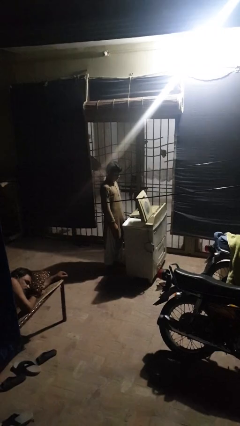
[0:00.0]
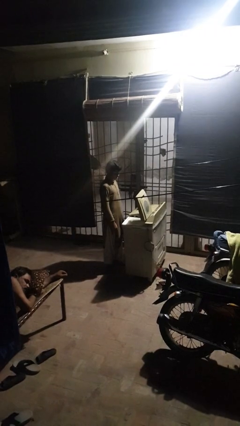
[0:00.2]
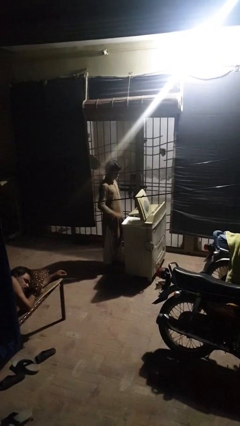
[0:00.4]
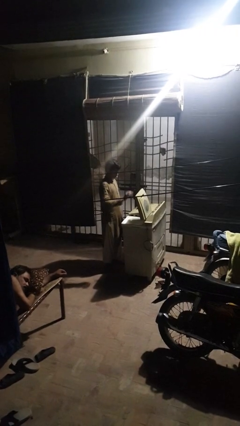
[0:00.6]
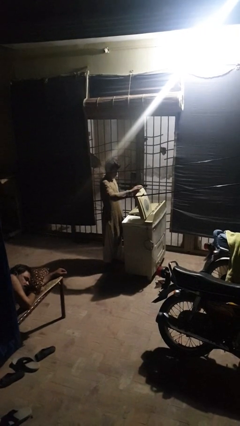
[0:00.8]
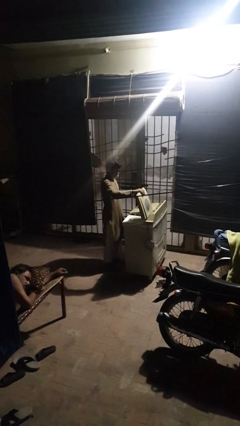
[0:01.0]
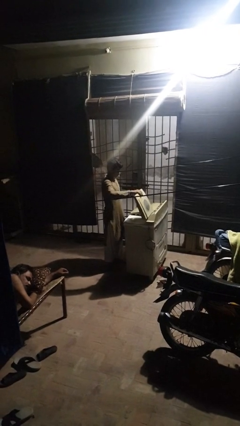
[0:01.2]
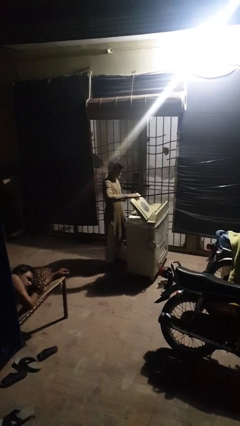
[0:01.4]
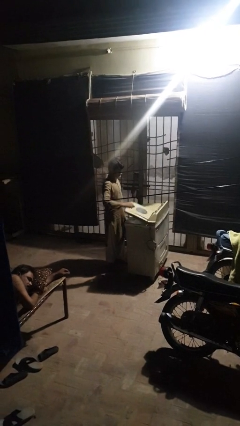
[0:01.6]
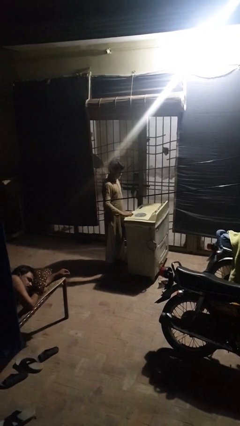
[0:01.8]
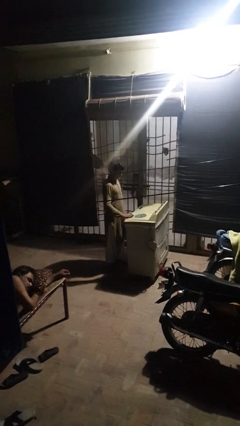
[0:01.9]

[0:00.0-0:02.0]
person closes clothes washer

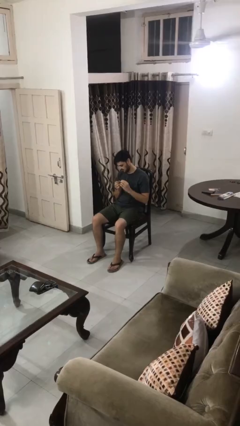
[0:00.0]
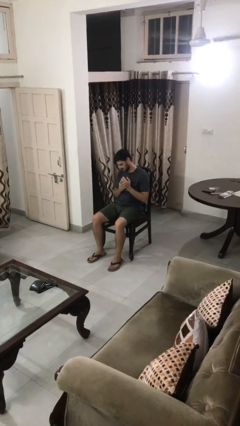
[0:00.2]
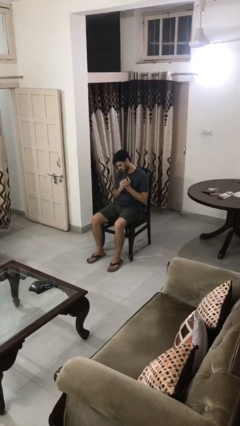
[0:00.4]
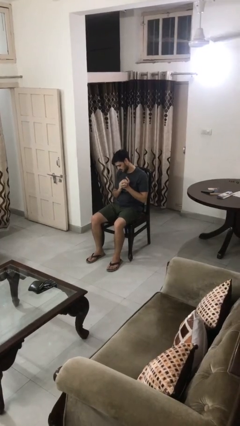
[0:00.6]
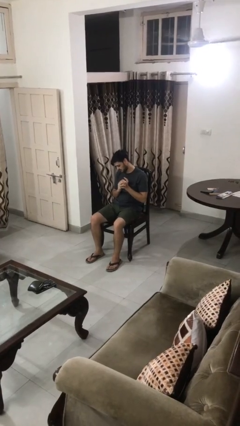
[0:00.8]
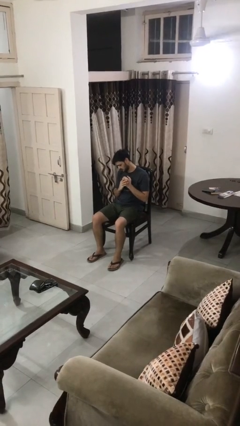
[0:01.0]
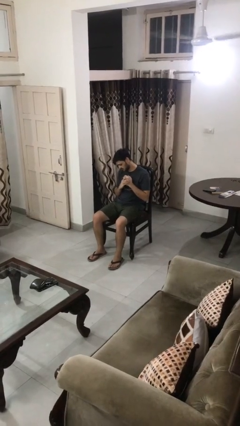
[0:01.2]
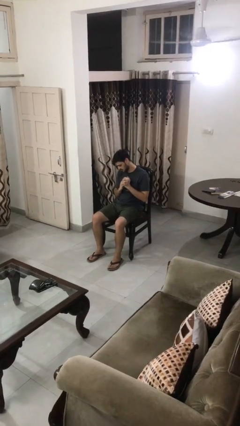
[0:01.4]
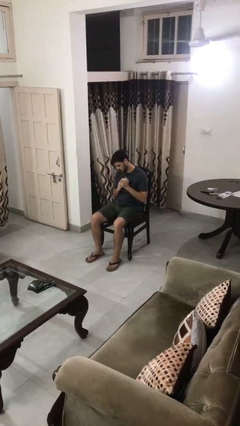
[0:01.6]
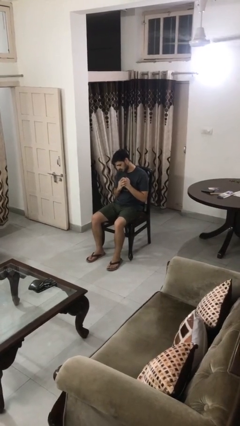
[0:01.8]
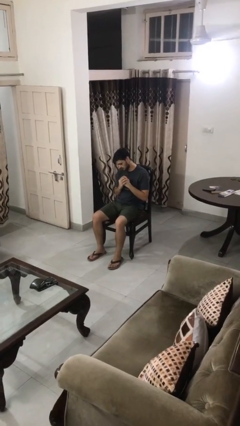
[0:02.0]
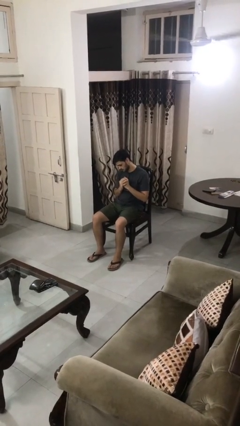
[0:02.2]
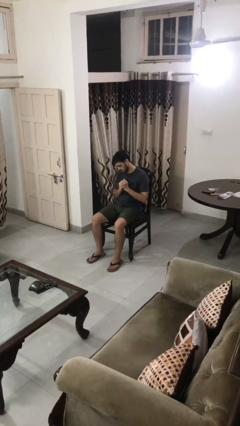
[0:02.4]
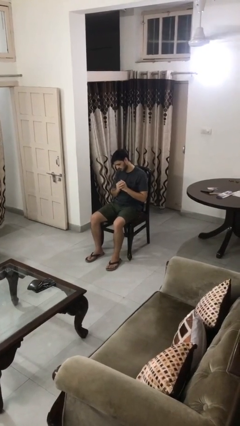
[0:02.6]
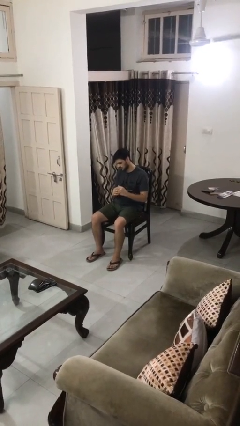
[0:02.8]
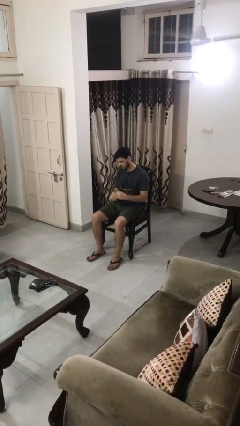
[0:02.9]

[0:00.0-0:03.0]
person cracks knuckles

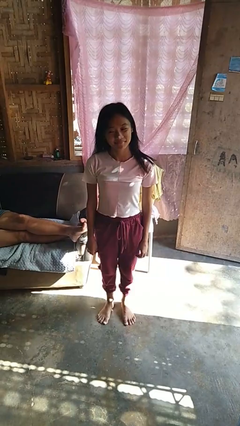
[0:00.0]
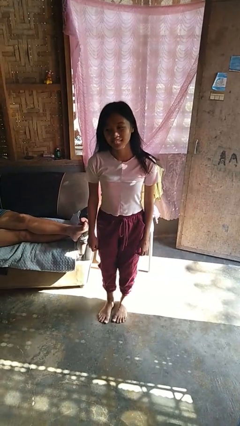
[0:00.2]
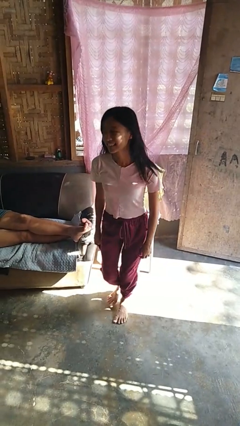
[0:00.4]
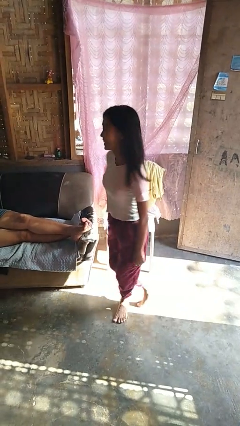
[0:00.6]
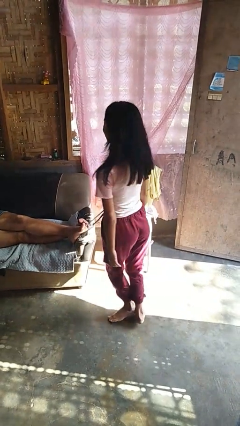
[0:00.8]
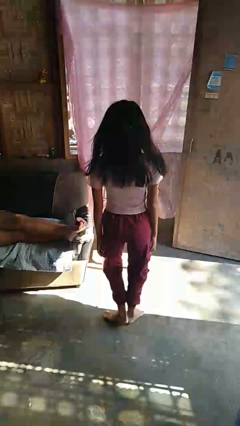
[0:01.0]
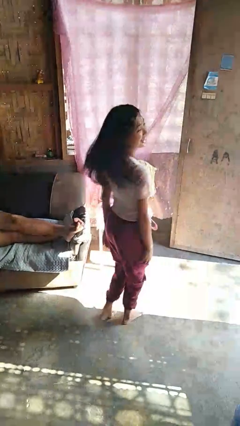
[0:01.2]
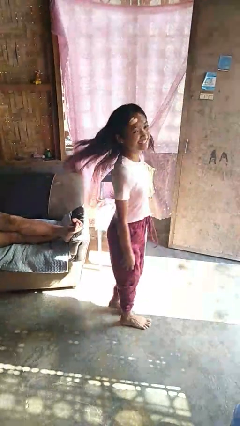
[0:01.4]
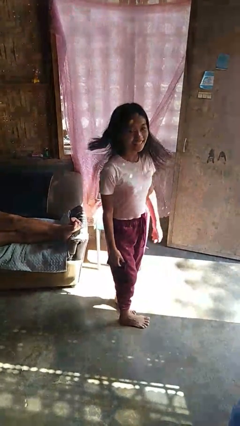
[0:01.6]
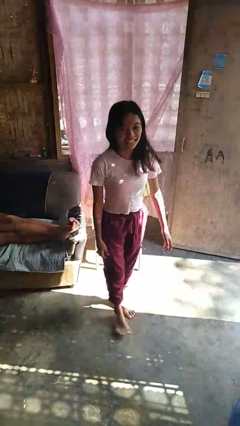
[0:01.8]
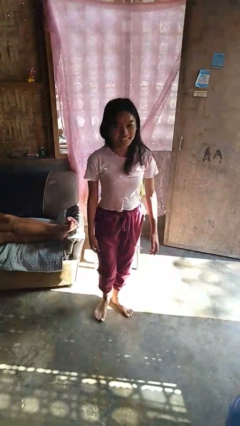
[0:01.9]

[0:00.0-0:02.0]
person twirls

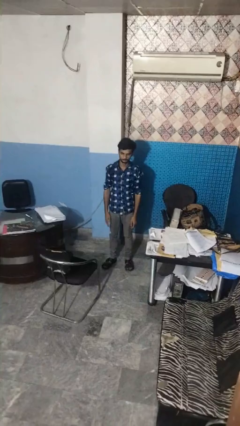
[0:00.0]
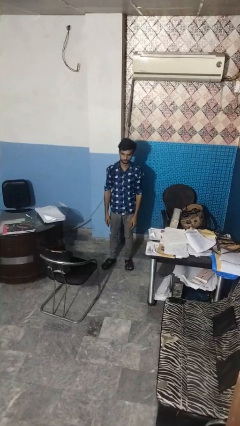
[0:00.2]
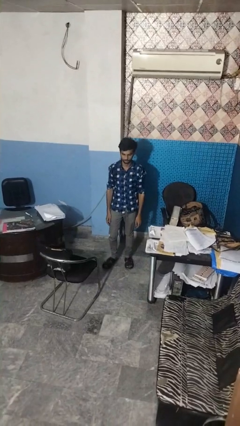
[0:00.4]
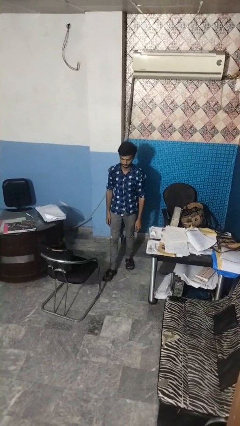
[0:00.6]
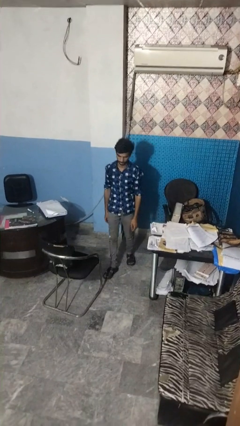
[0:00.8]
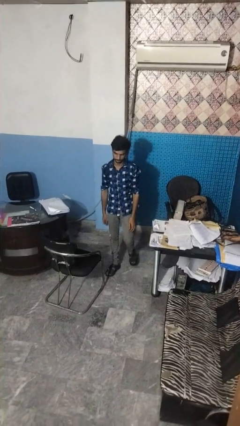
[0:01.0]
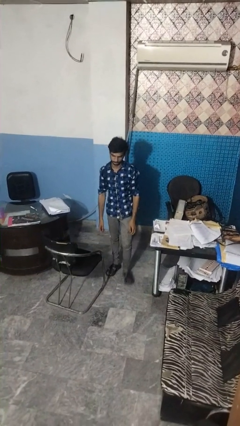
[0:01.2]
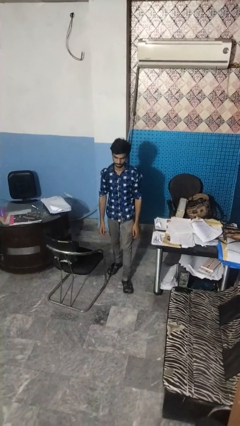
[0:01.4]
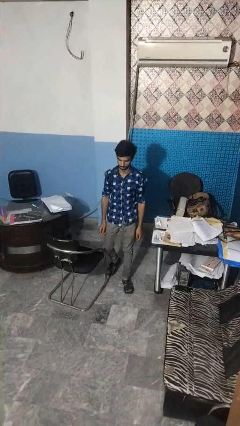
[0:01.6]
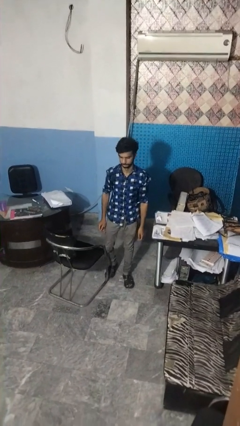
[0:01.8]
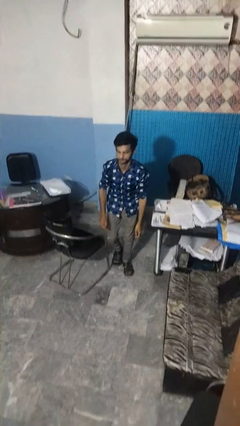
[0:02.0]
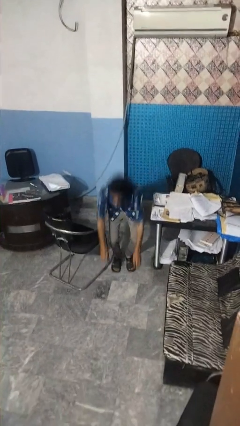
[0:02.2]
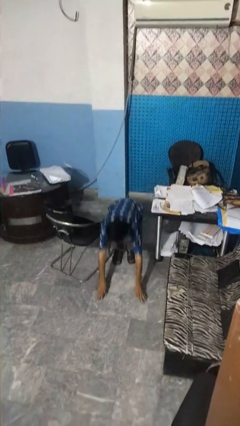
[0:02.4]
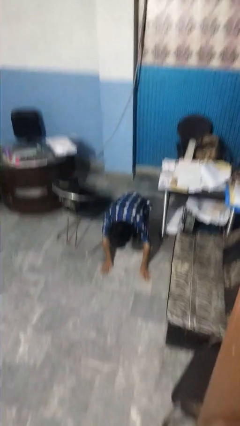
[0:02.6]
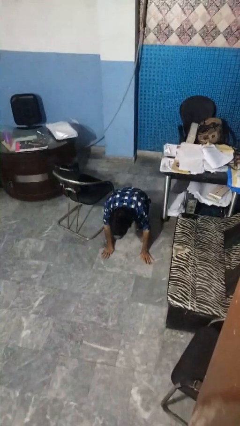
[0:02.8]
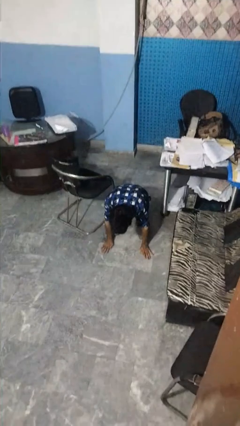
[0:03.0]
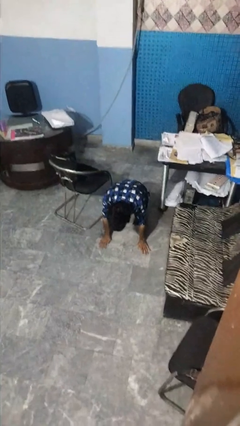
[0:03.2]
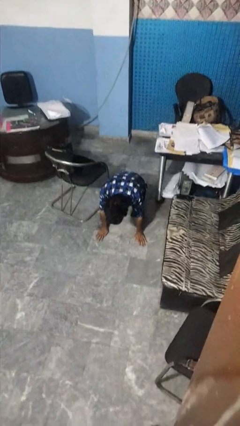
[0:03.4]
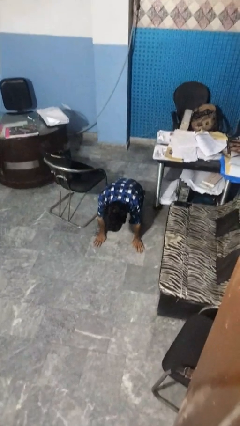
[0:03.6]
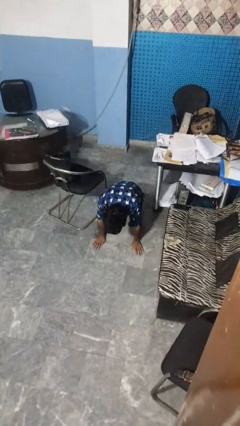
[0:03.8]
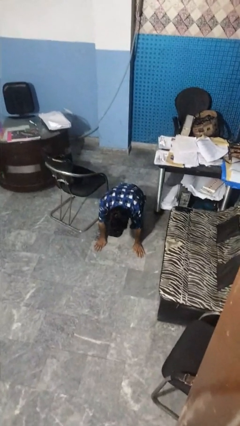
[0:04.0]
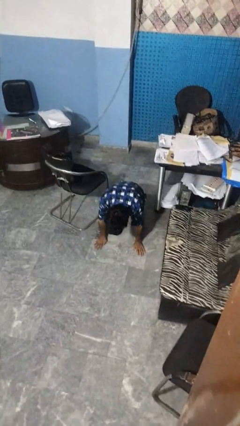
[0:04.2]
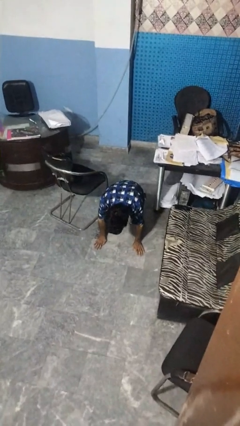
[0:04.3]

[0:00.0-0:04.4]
person trips on object on floor

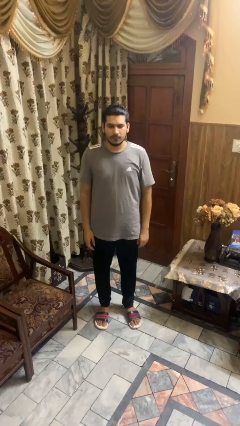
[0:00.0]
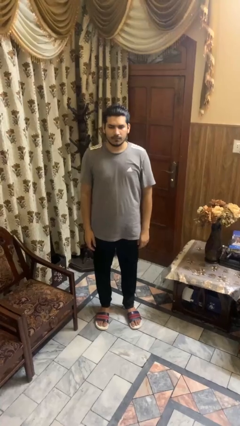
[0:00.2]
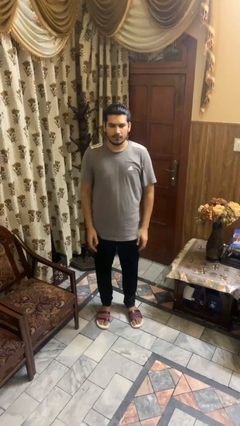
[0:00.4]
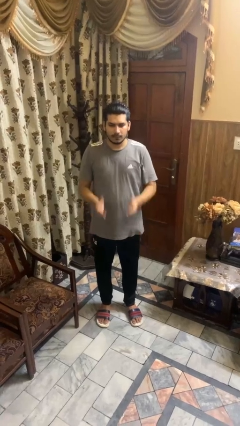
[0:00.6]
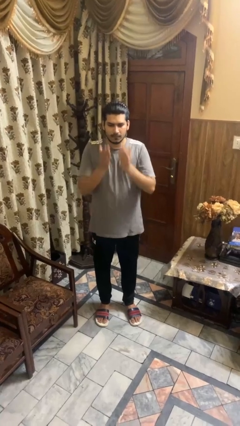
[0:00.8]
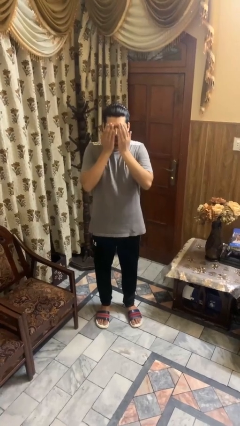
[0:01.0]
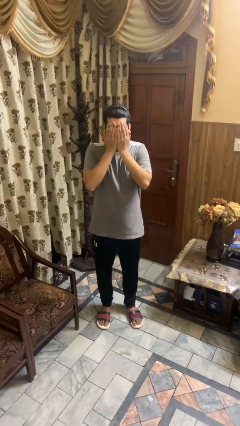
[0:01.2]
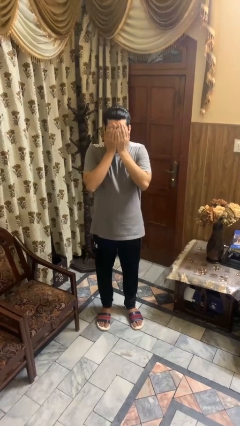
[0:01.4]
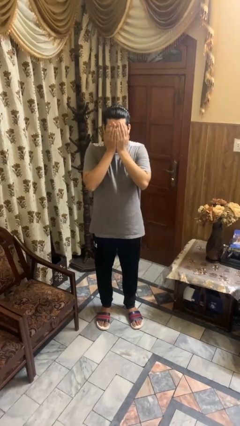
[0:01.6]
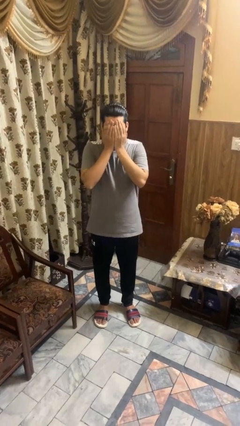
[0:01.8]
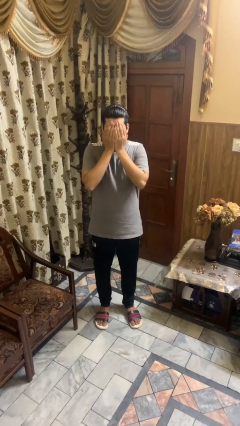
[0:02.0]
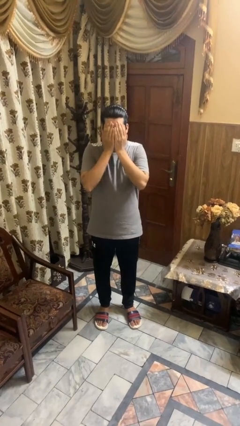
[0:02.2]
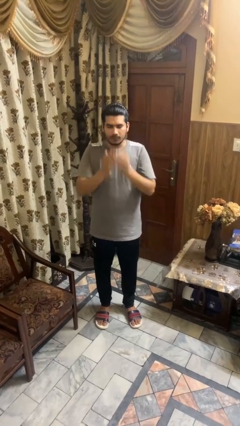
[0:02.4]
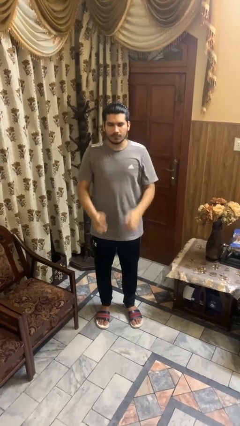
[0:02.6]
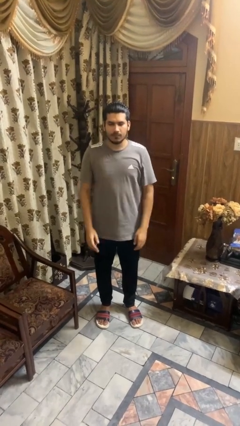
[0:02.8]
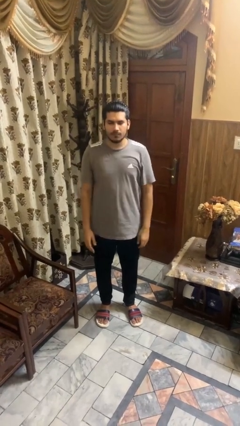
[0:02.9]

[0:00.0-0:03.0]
person covers face with hands

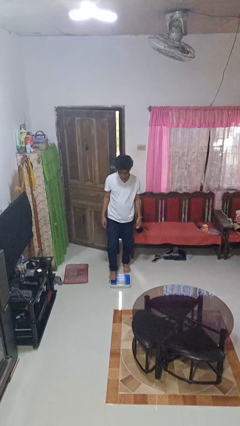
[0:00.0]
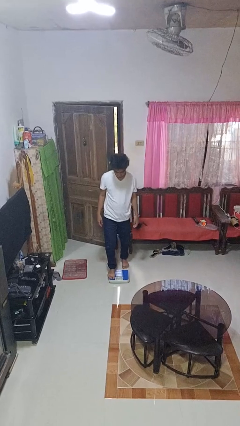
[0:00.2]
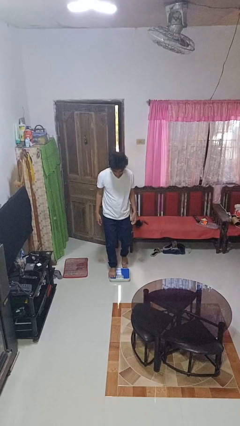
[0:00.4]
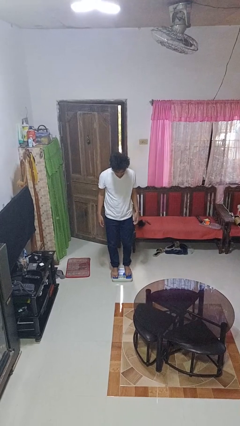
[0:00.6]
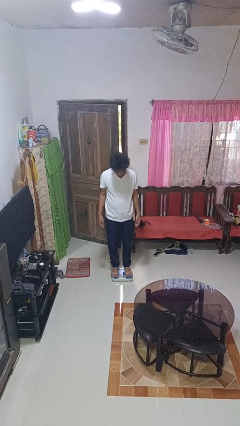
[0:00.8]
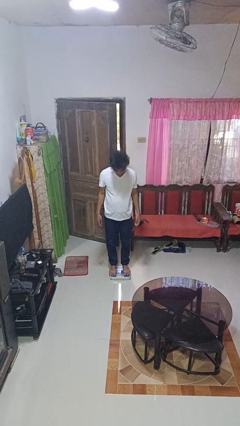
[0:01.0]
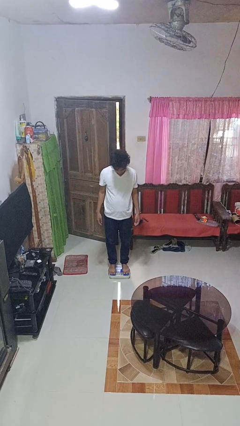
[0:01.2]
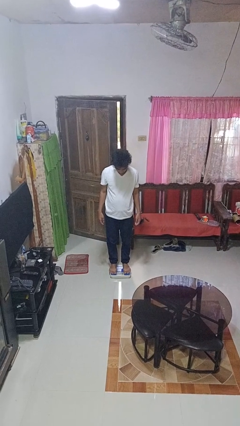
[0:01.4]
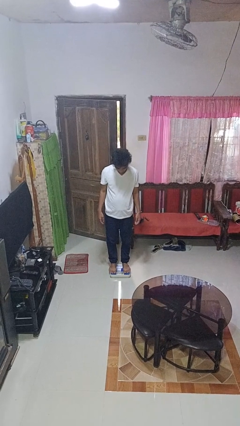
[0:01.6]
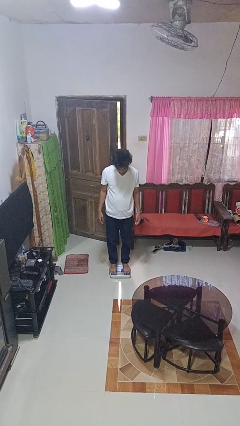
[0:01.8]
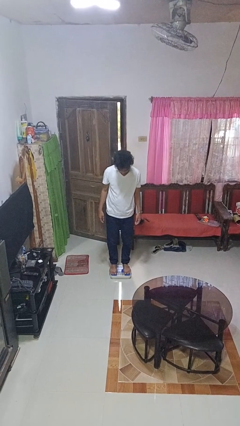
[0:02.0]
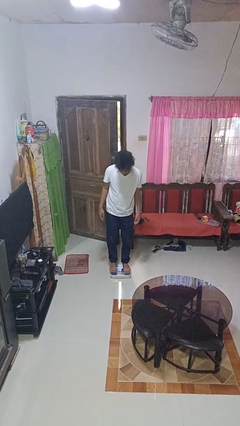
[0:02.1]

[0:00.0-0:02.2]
person uses bodyweight scale

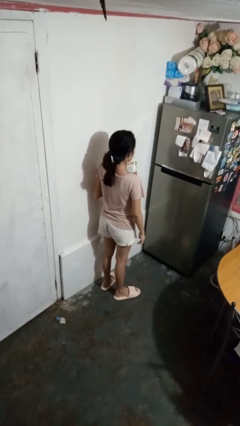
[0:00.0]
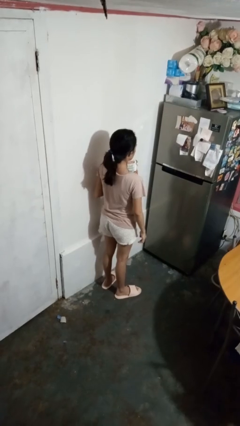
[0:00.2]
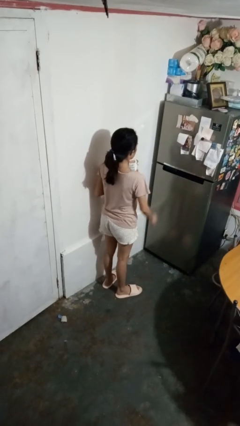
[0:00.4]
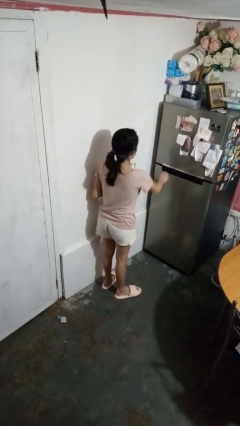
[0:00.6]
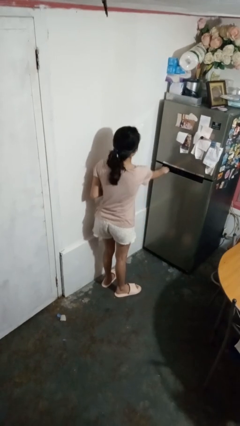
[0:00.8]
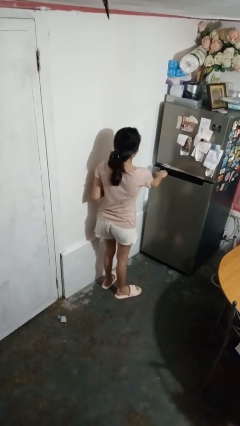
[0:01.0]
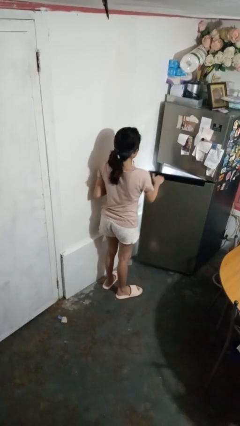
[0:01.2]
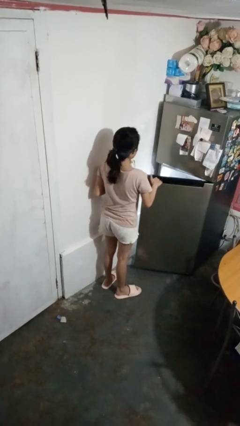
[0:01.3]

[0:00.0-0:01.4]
person opens refrigerator
